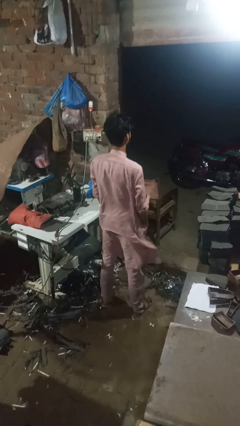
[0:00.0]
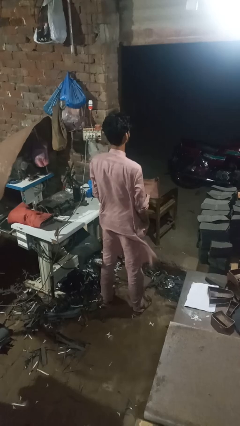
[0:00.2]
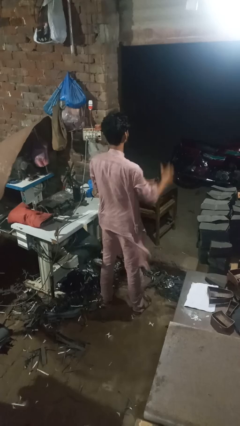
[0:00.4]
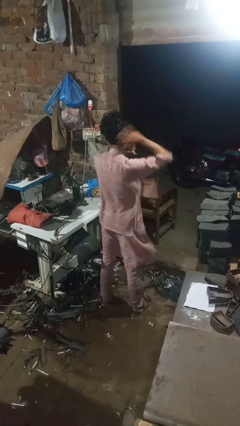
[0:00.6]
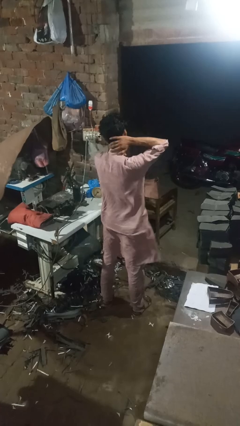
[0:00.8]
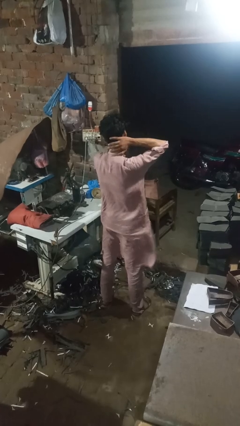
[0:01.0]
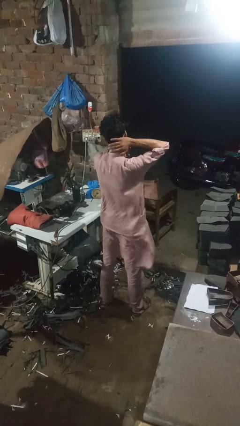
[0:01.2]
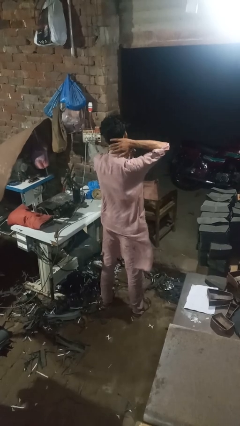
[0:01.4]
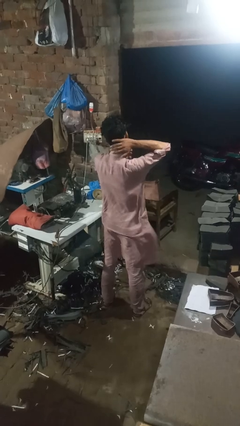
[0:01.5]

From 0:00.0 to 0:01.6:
person rubs neck

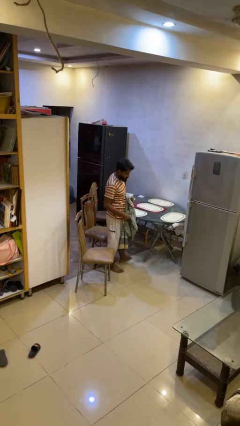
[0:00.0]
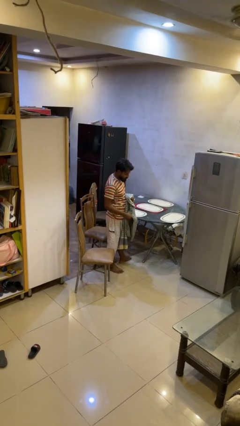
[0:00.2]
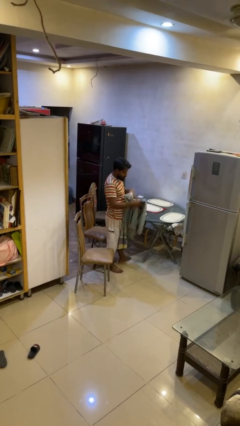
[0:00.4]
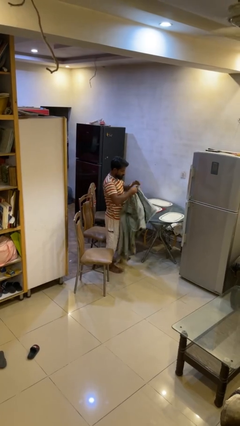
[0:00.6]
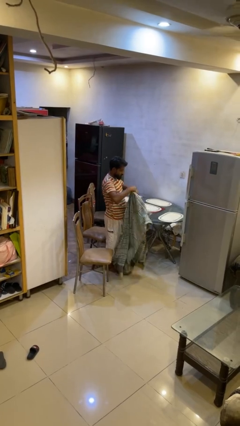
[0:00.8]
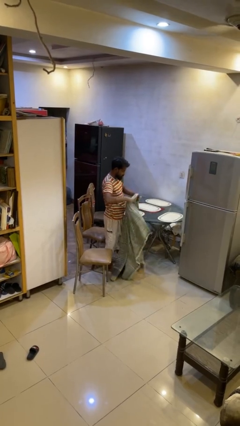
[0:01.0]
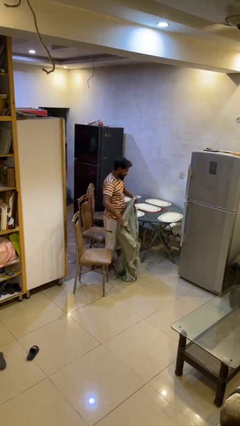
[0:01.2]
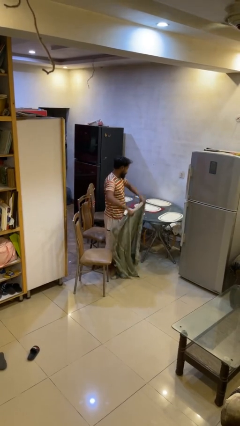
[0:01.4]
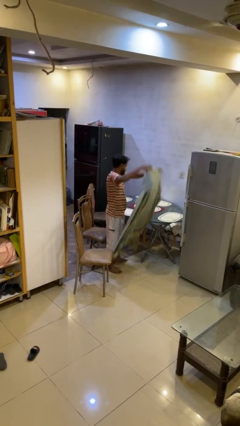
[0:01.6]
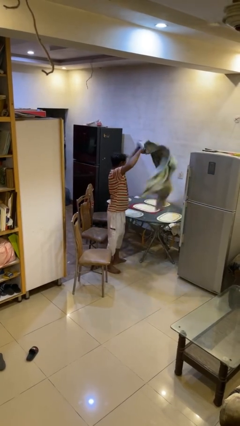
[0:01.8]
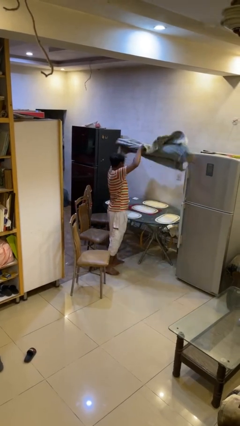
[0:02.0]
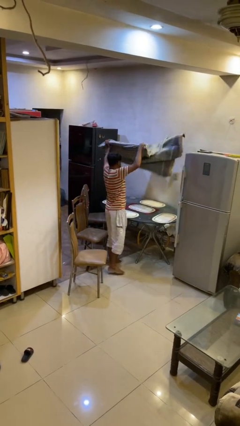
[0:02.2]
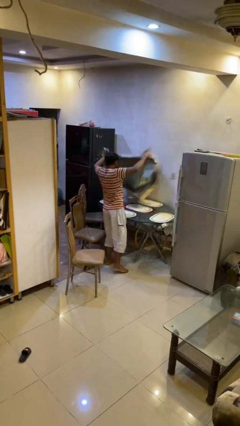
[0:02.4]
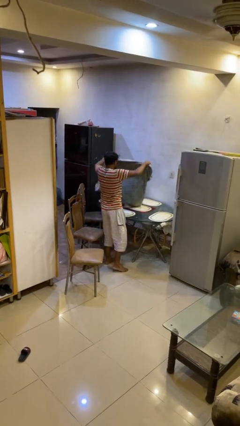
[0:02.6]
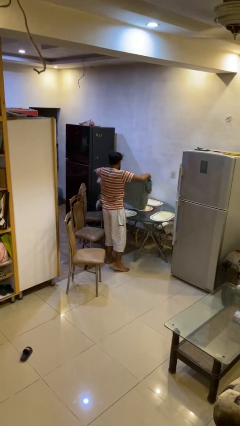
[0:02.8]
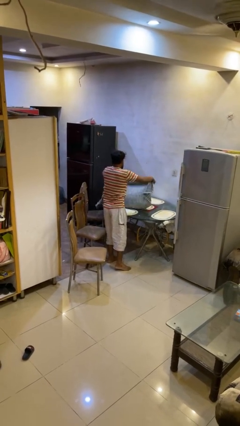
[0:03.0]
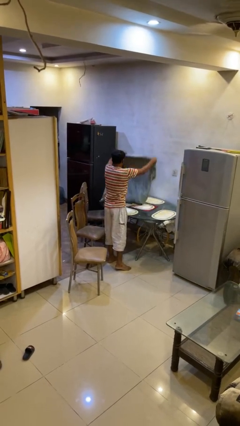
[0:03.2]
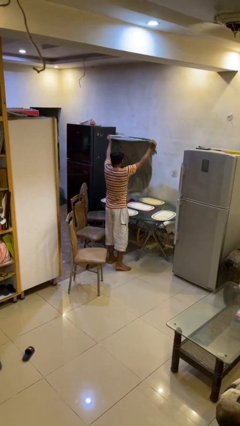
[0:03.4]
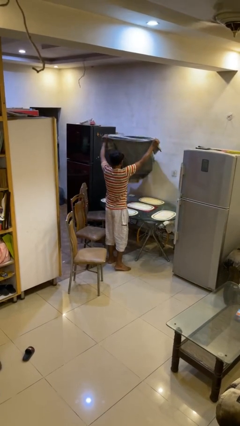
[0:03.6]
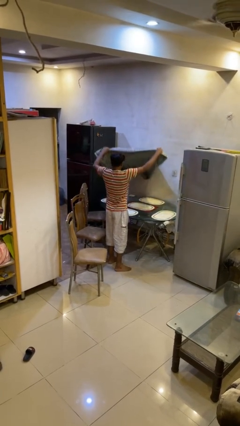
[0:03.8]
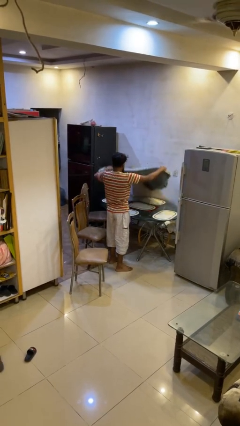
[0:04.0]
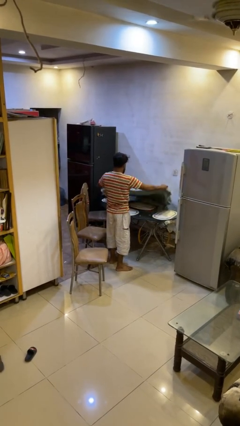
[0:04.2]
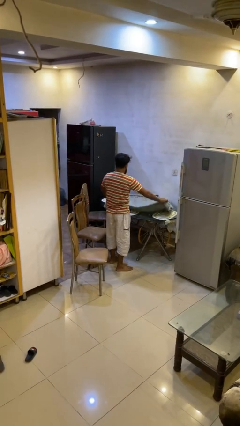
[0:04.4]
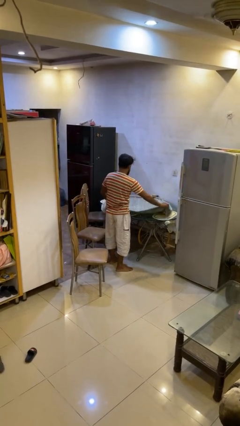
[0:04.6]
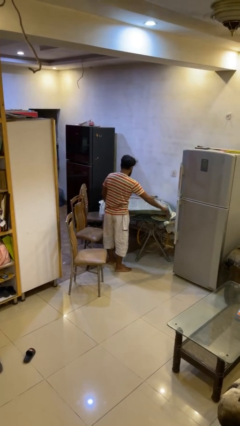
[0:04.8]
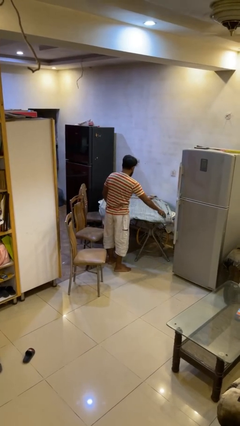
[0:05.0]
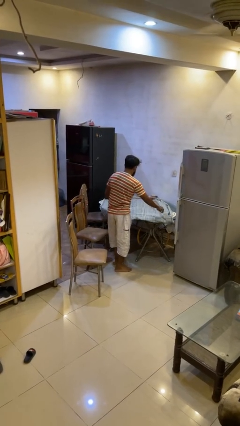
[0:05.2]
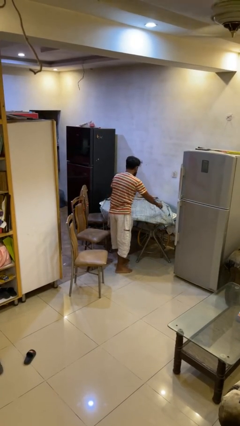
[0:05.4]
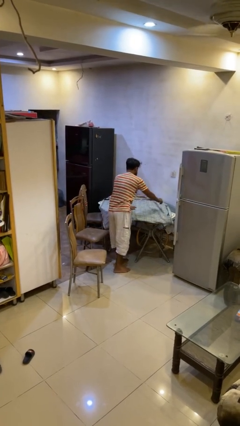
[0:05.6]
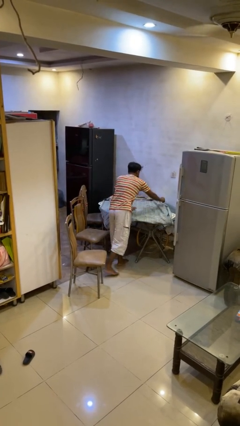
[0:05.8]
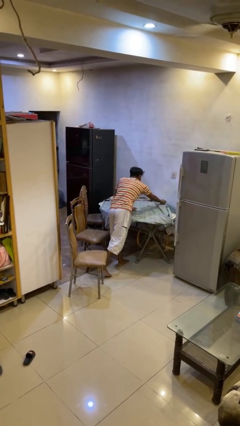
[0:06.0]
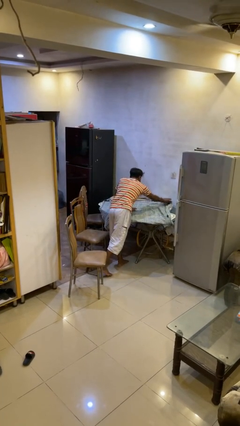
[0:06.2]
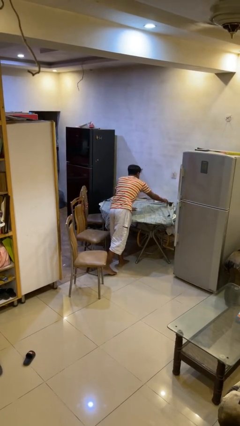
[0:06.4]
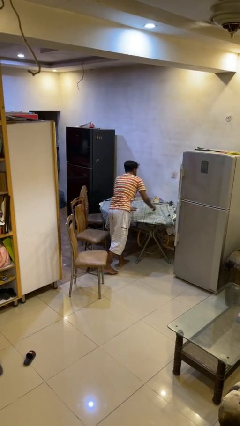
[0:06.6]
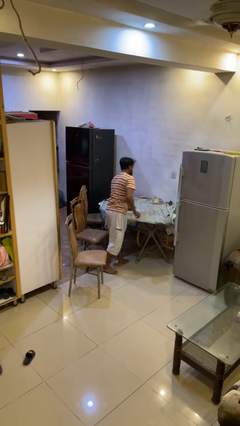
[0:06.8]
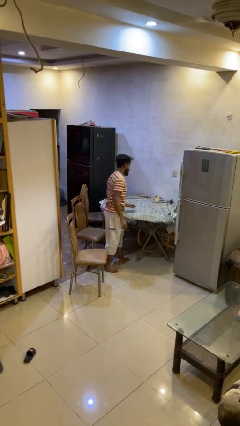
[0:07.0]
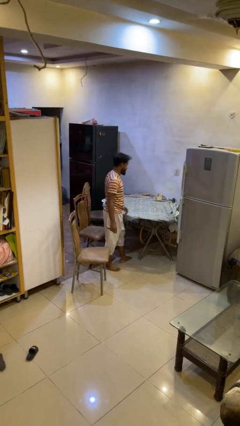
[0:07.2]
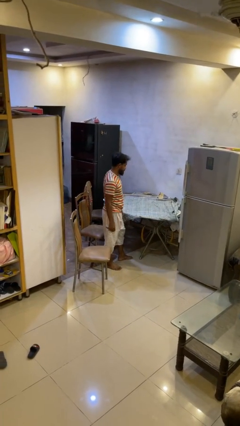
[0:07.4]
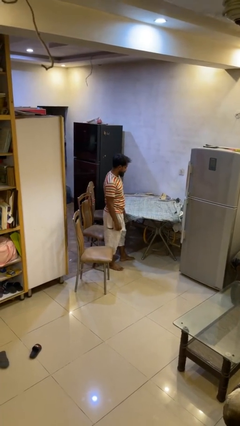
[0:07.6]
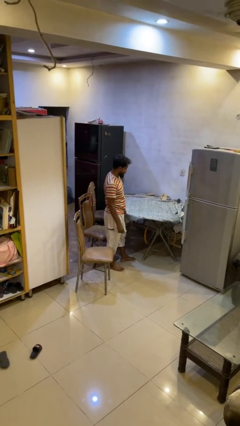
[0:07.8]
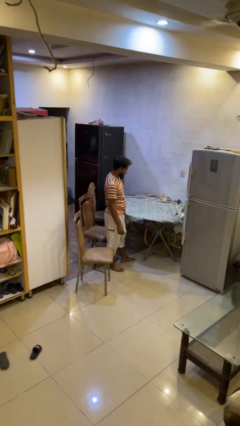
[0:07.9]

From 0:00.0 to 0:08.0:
person spreads tablecloth

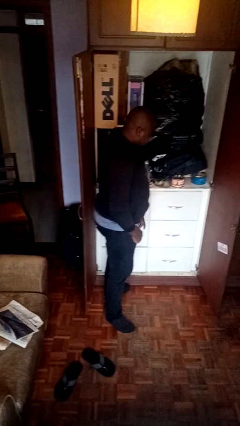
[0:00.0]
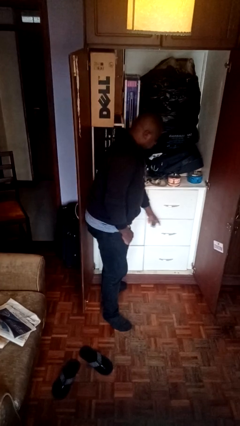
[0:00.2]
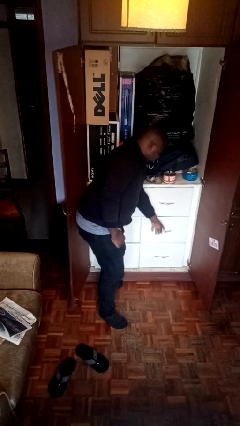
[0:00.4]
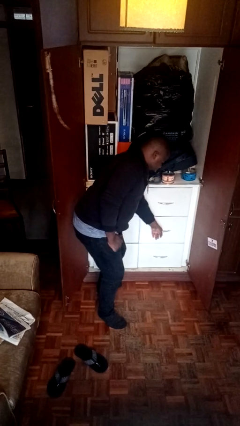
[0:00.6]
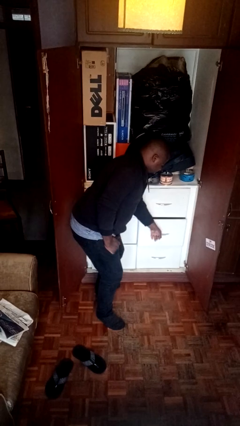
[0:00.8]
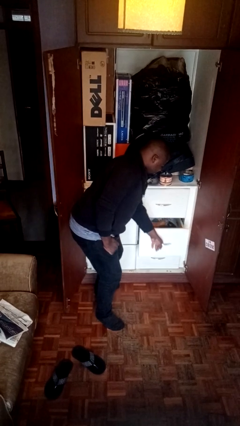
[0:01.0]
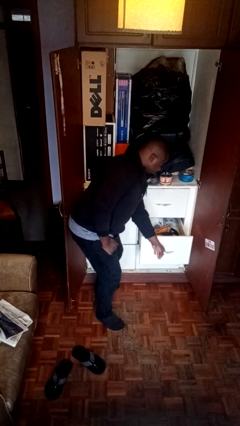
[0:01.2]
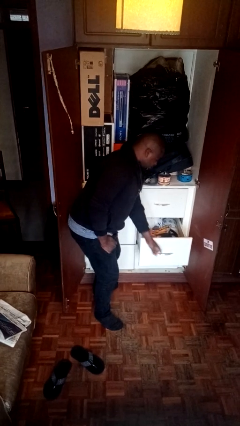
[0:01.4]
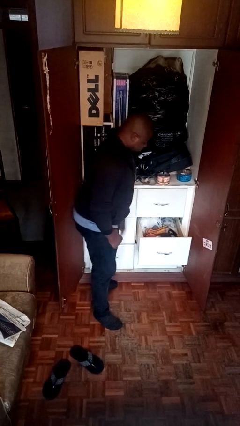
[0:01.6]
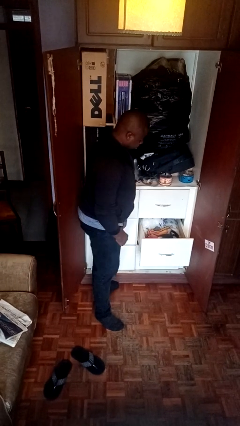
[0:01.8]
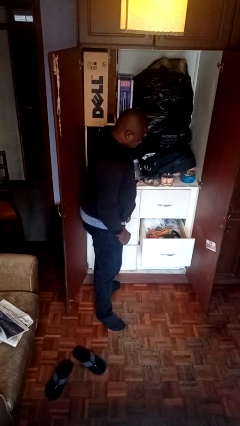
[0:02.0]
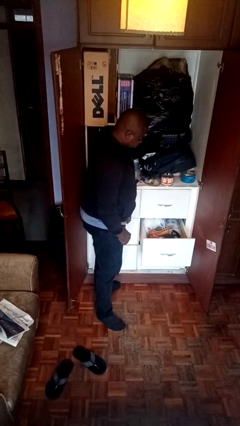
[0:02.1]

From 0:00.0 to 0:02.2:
person opens dresser drawer

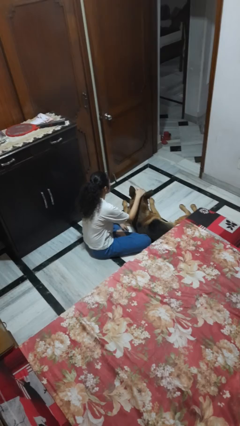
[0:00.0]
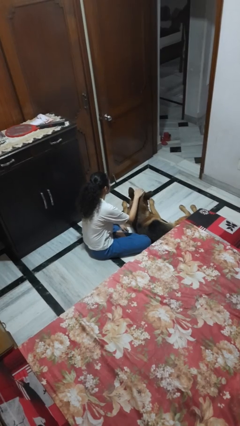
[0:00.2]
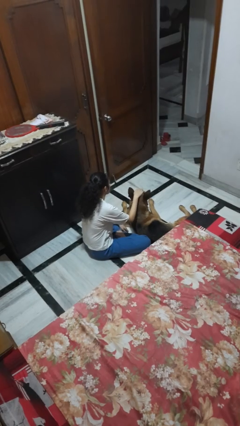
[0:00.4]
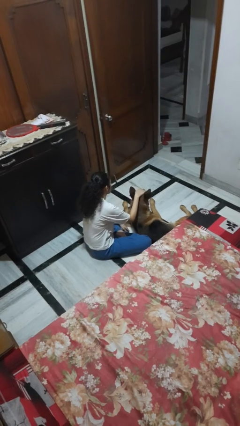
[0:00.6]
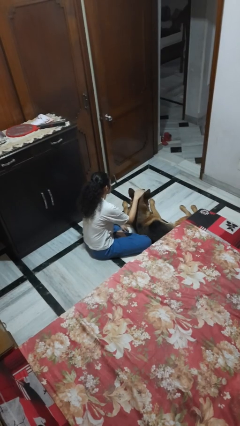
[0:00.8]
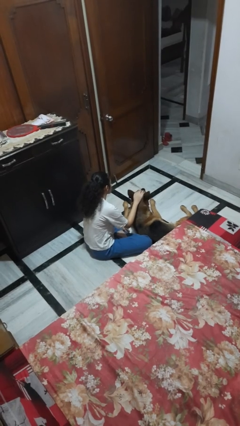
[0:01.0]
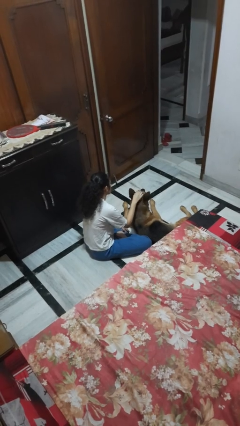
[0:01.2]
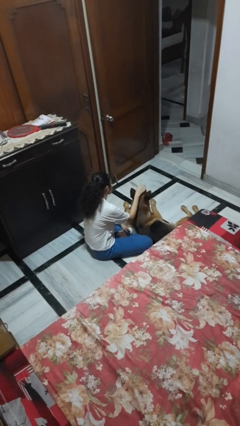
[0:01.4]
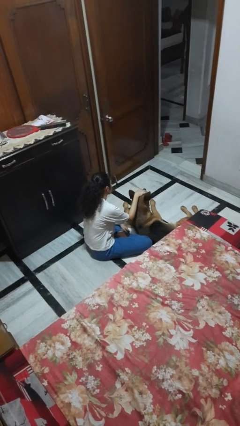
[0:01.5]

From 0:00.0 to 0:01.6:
person pets dog

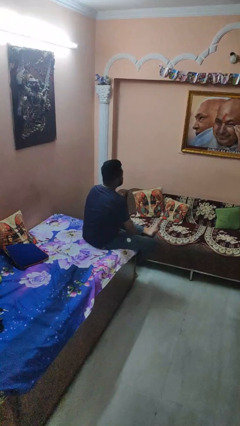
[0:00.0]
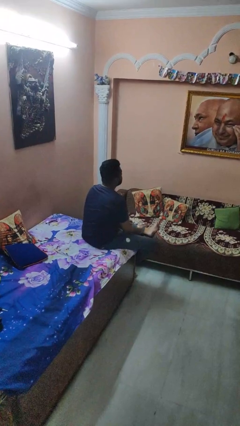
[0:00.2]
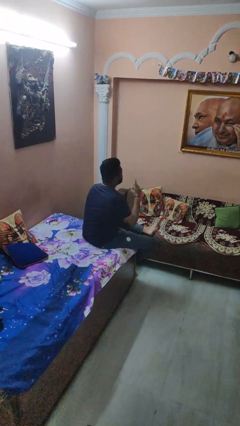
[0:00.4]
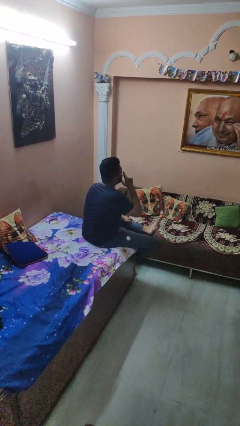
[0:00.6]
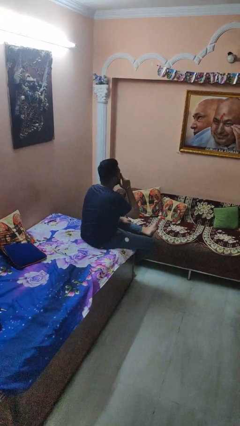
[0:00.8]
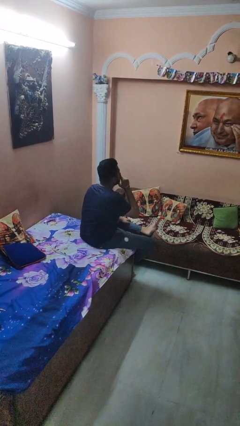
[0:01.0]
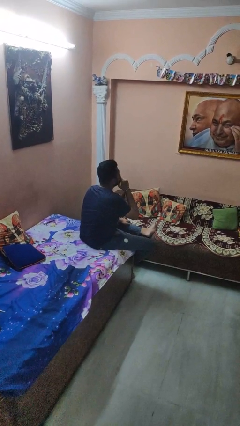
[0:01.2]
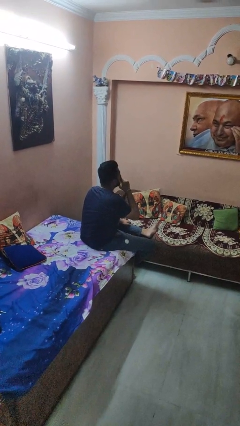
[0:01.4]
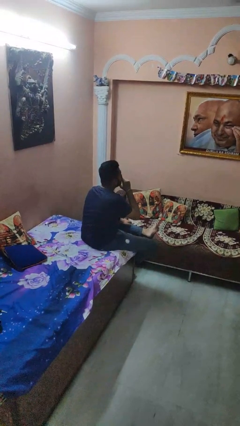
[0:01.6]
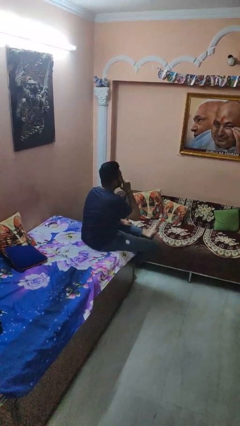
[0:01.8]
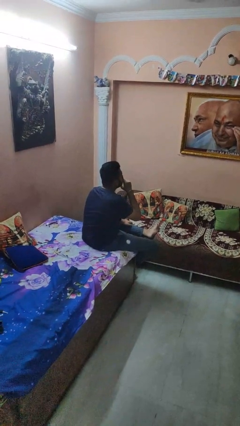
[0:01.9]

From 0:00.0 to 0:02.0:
person gestures be quiet

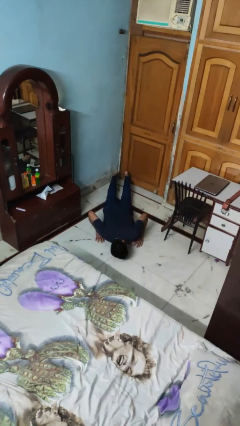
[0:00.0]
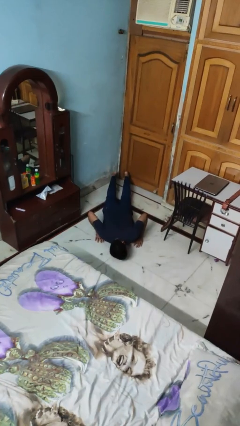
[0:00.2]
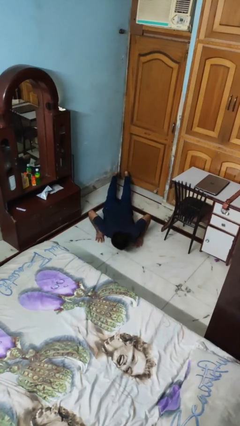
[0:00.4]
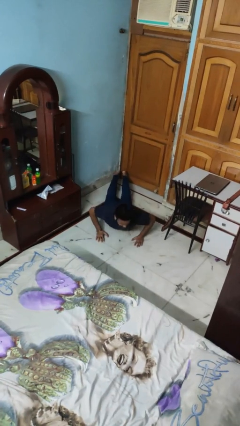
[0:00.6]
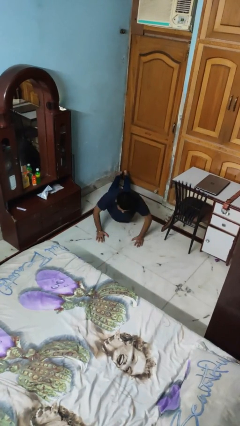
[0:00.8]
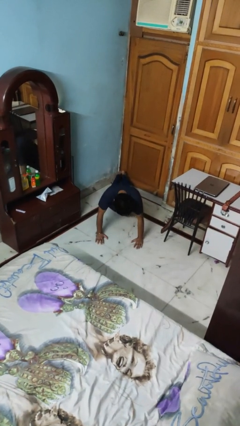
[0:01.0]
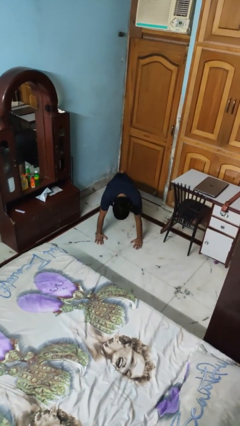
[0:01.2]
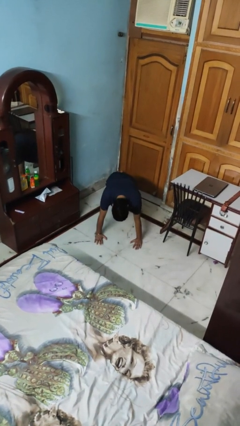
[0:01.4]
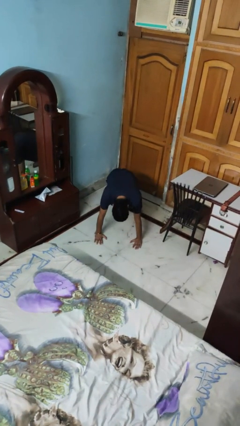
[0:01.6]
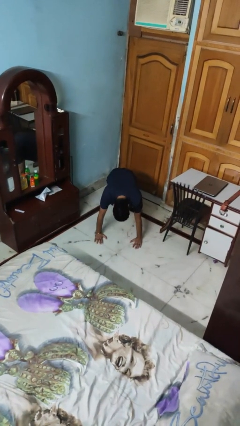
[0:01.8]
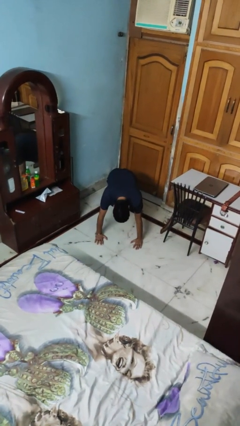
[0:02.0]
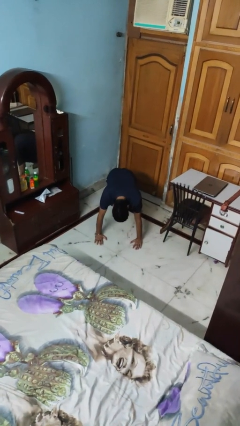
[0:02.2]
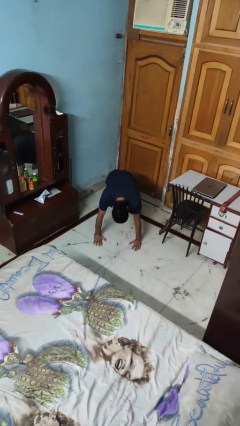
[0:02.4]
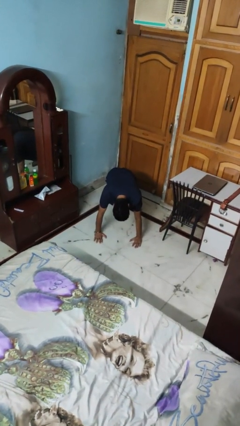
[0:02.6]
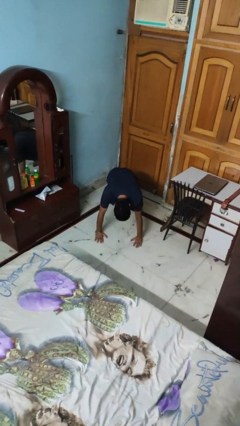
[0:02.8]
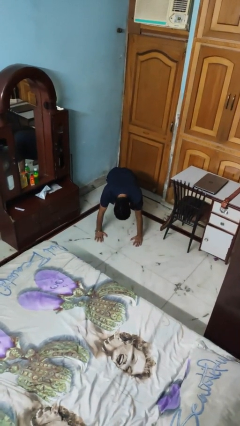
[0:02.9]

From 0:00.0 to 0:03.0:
person exercises with pushup
